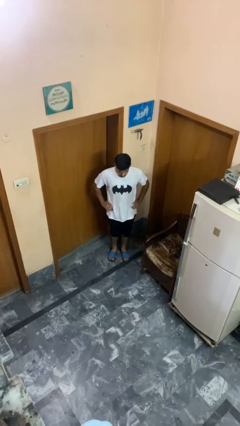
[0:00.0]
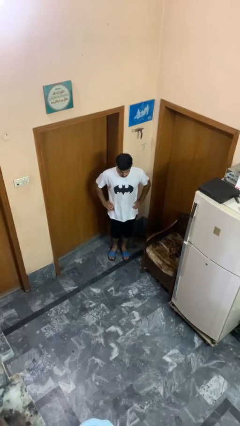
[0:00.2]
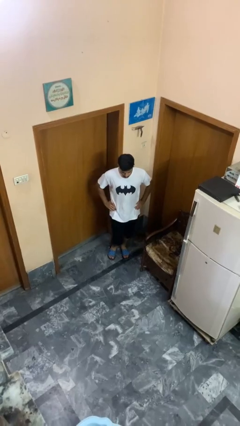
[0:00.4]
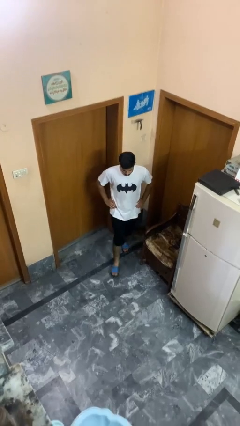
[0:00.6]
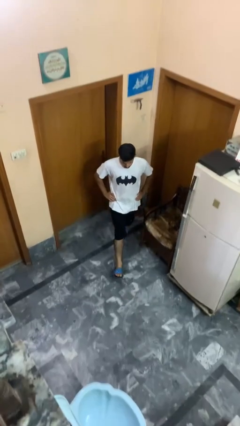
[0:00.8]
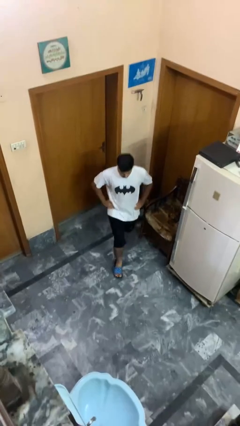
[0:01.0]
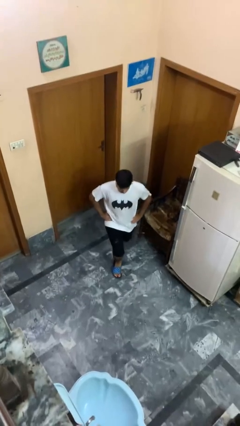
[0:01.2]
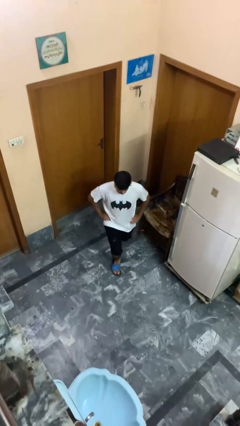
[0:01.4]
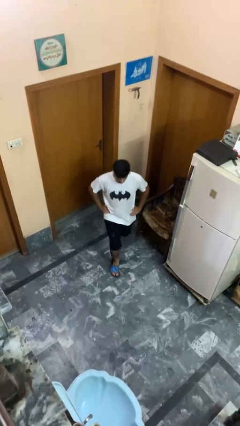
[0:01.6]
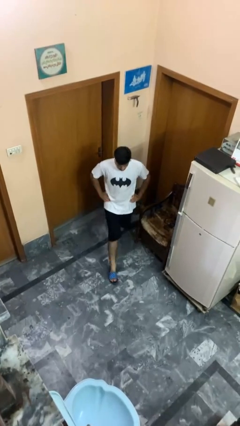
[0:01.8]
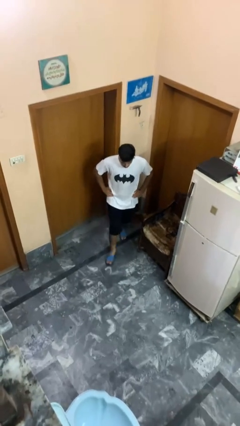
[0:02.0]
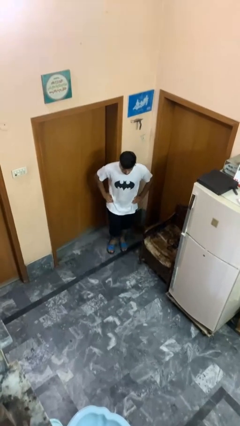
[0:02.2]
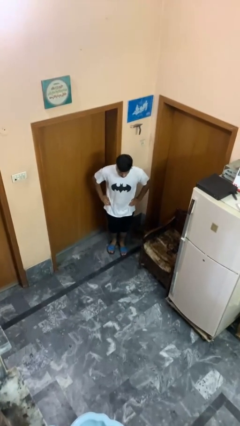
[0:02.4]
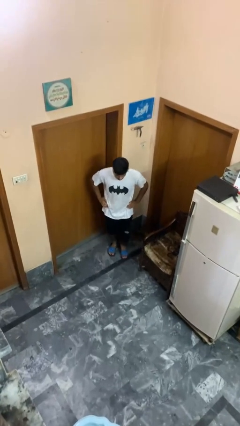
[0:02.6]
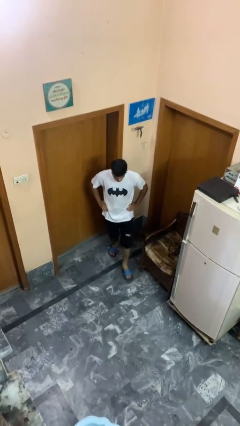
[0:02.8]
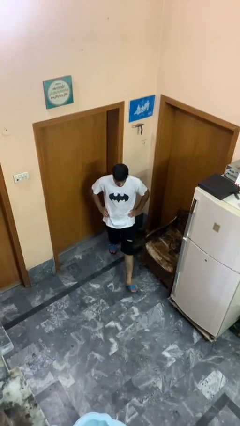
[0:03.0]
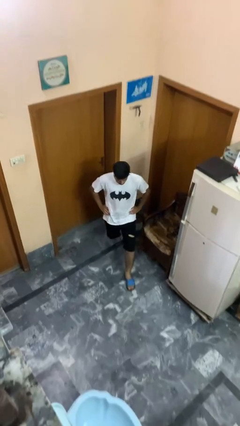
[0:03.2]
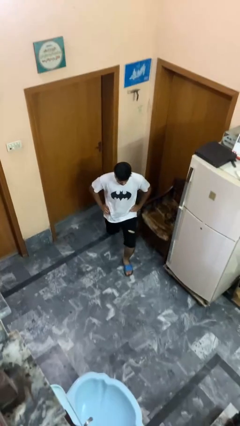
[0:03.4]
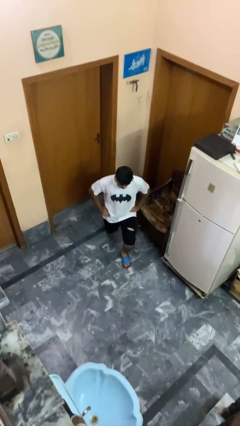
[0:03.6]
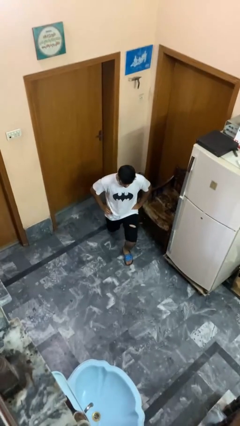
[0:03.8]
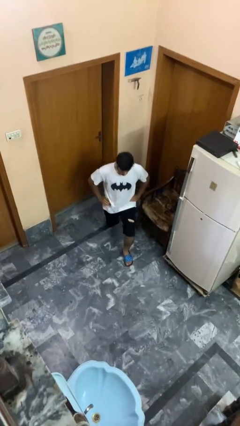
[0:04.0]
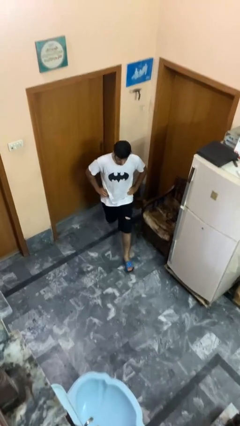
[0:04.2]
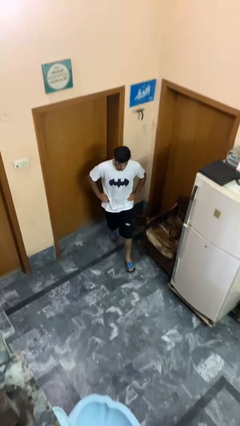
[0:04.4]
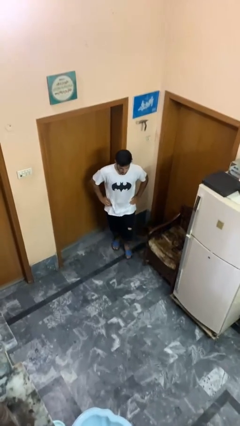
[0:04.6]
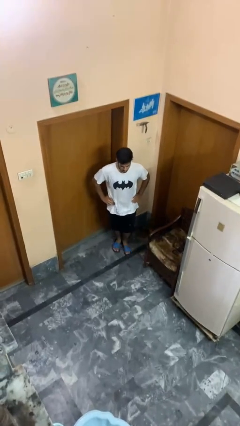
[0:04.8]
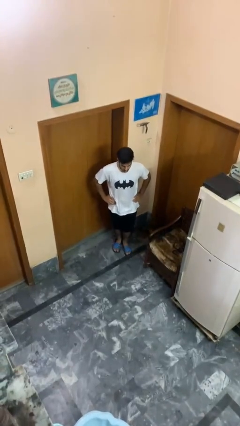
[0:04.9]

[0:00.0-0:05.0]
person exercises with lunges

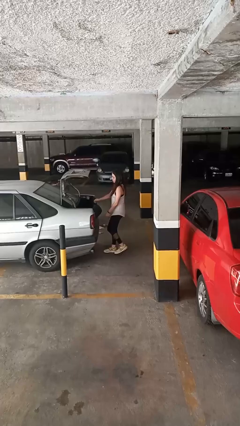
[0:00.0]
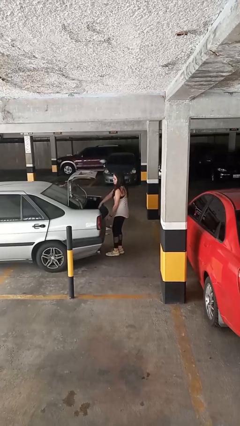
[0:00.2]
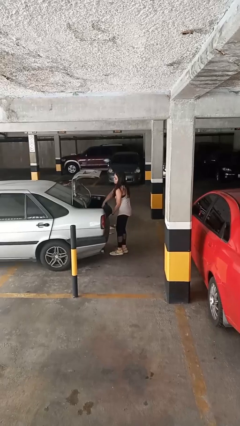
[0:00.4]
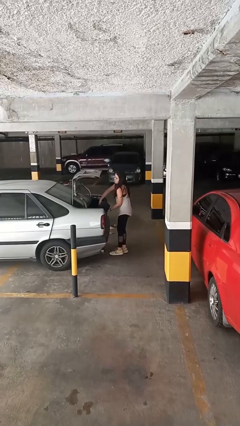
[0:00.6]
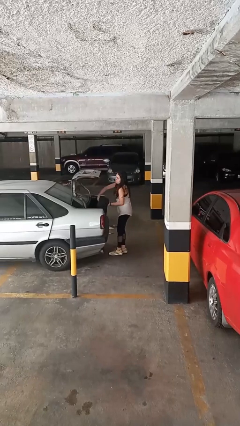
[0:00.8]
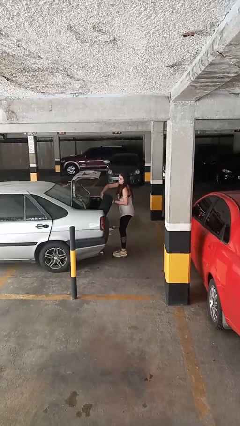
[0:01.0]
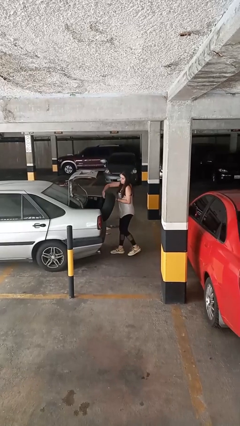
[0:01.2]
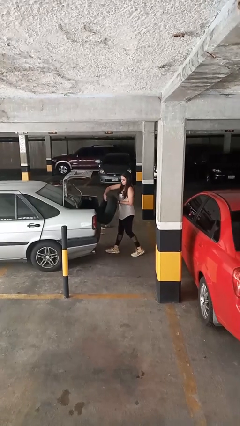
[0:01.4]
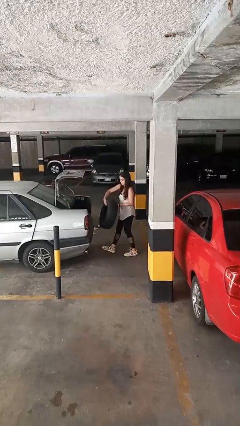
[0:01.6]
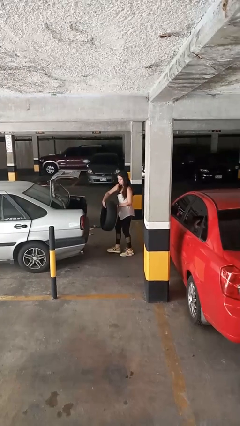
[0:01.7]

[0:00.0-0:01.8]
person unloads car

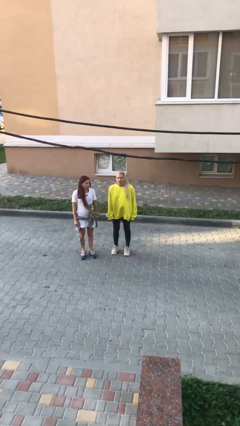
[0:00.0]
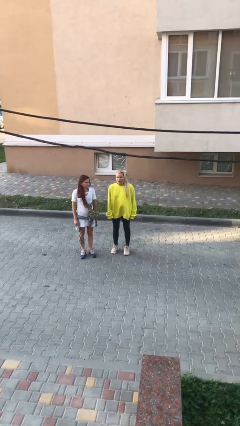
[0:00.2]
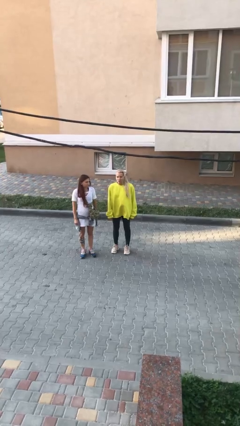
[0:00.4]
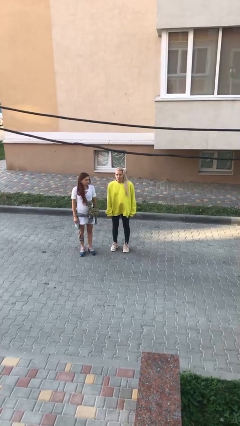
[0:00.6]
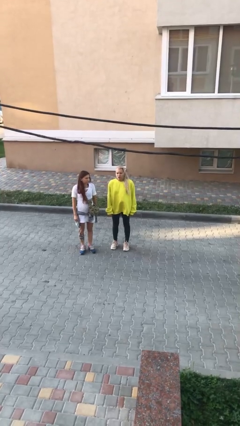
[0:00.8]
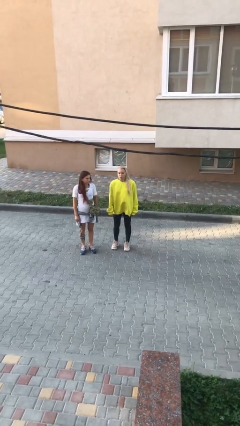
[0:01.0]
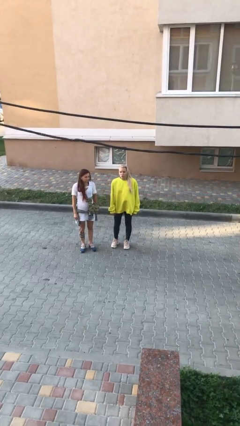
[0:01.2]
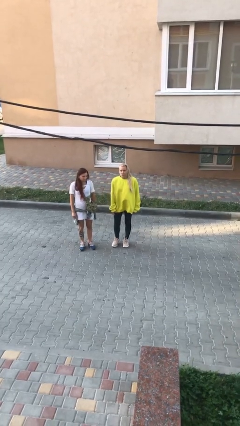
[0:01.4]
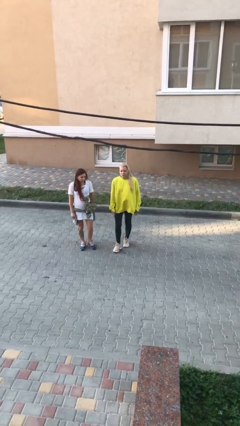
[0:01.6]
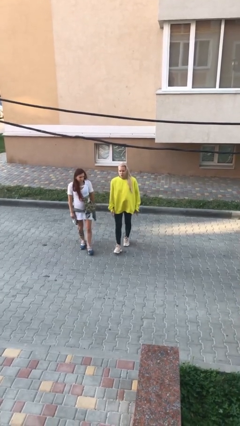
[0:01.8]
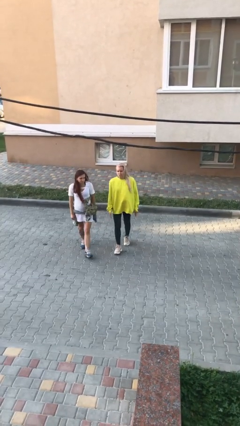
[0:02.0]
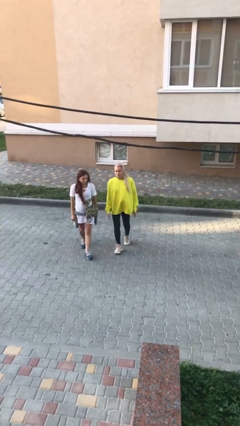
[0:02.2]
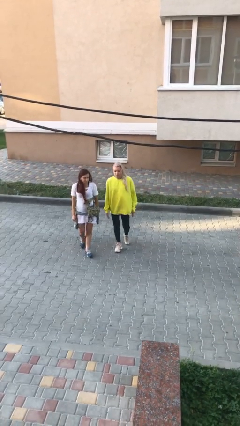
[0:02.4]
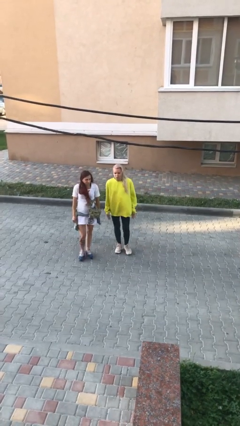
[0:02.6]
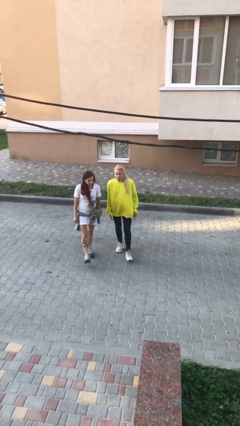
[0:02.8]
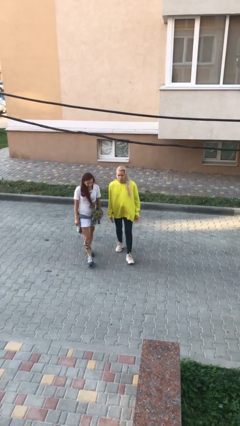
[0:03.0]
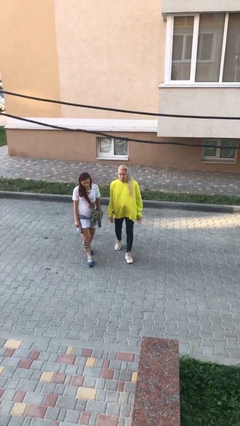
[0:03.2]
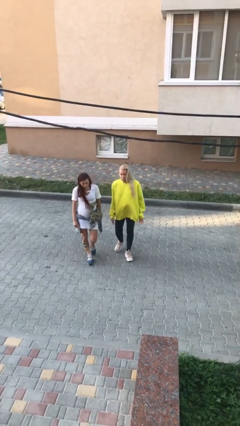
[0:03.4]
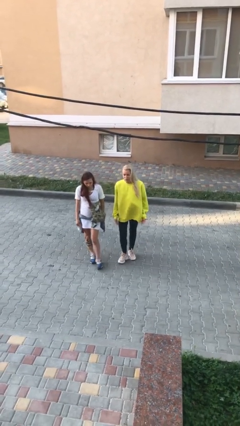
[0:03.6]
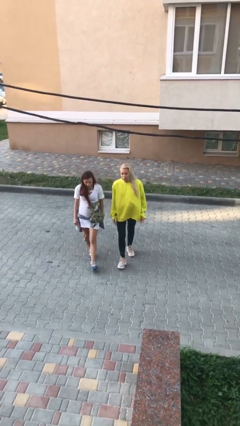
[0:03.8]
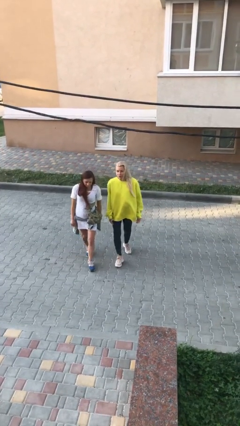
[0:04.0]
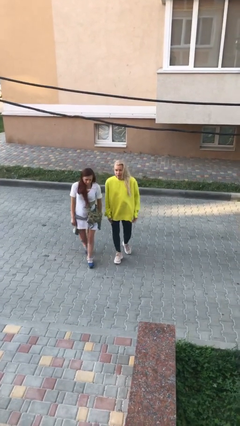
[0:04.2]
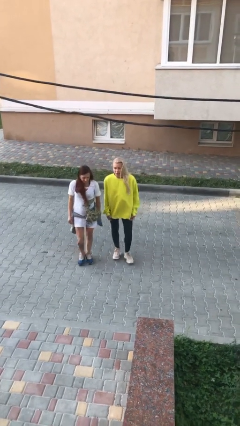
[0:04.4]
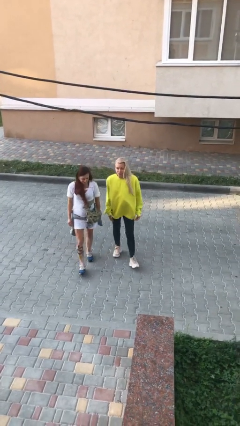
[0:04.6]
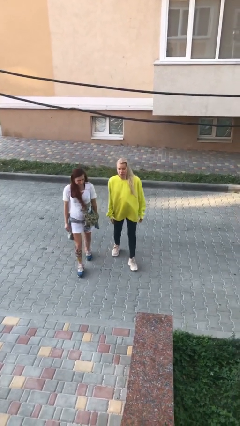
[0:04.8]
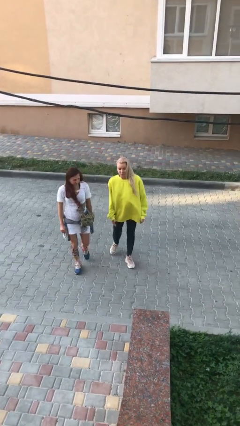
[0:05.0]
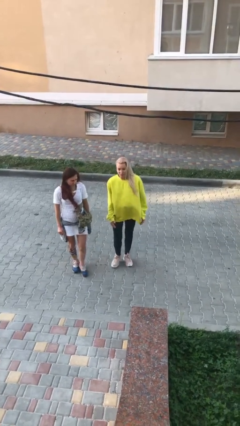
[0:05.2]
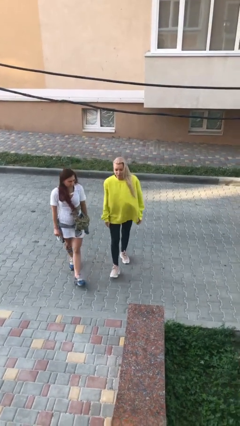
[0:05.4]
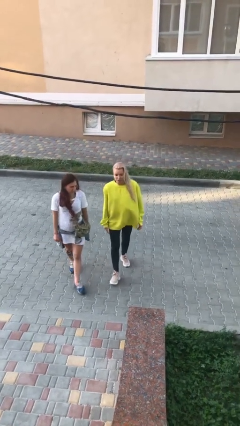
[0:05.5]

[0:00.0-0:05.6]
person talks to person

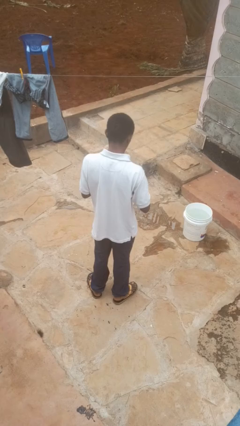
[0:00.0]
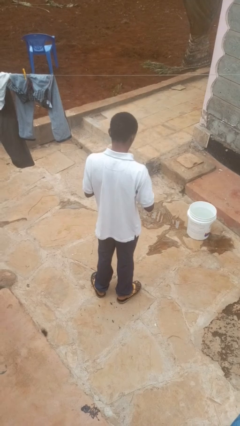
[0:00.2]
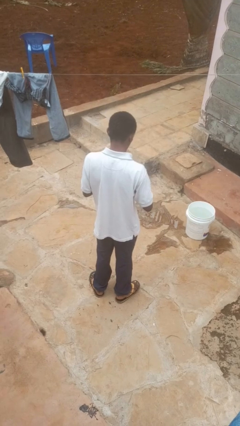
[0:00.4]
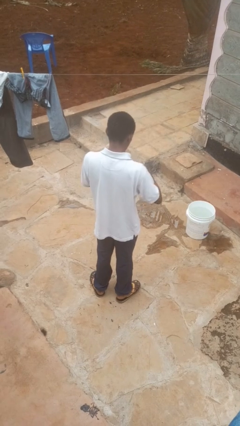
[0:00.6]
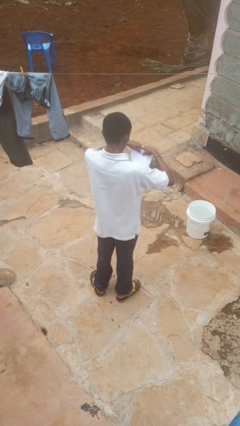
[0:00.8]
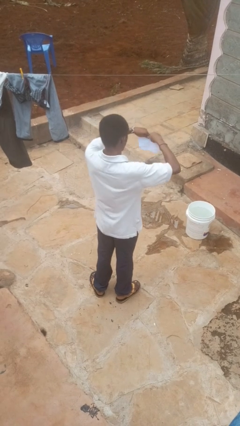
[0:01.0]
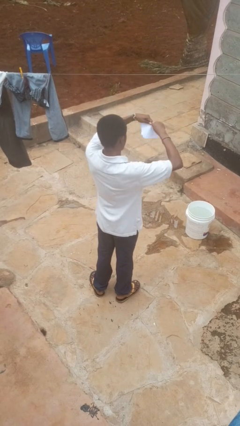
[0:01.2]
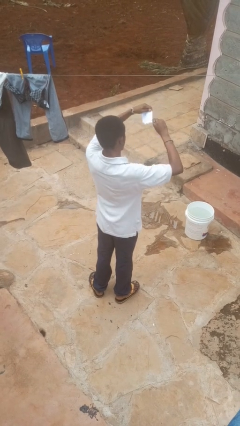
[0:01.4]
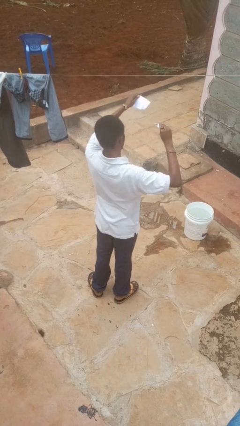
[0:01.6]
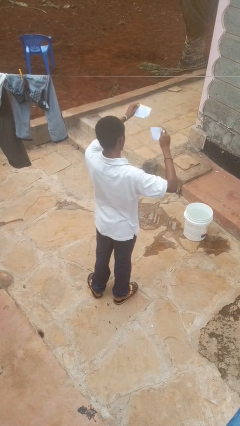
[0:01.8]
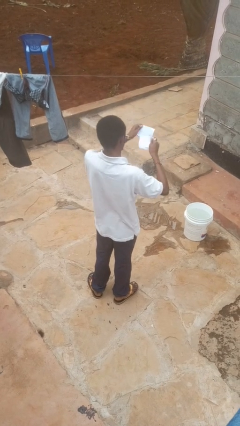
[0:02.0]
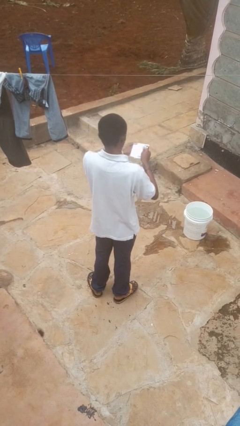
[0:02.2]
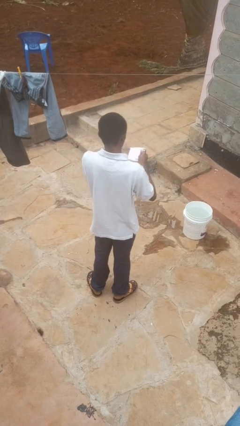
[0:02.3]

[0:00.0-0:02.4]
person tears paper

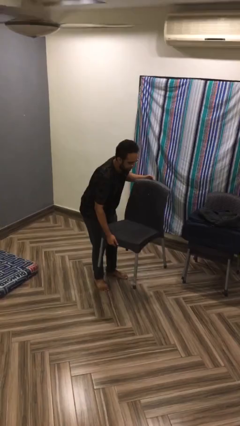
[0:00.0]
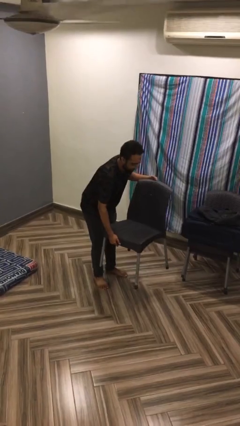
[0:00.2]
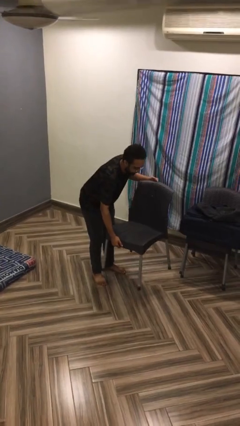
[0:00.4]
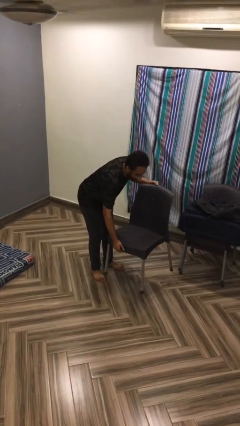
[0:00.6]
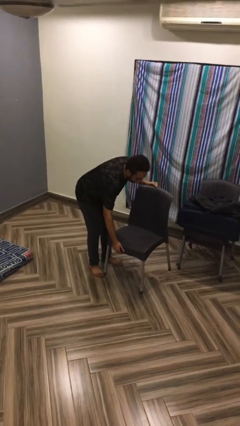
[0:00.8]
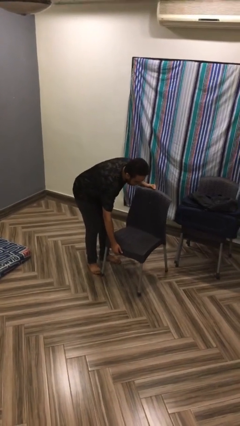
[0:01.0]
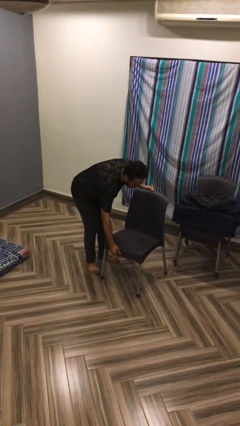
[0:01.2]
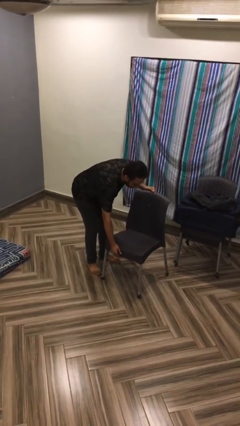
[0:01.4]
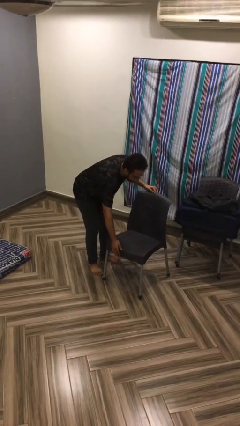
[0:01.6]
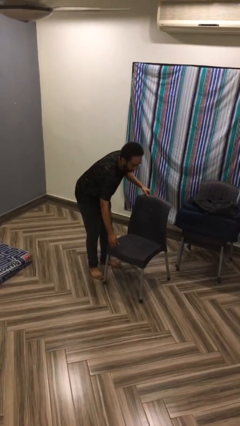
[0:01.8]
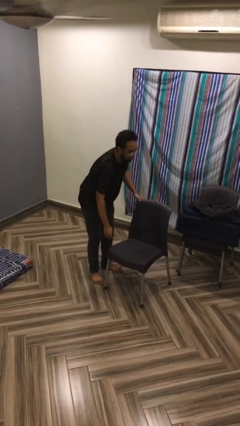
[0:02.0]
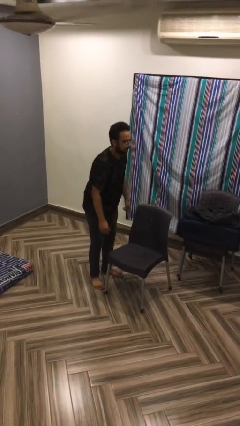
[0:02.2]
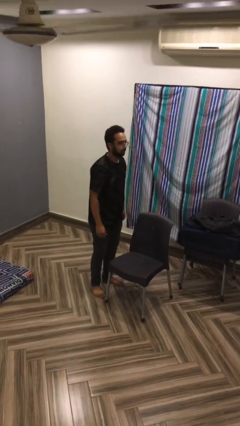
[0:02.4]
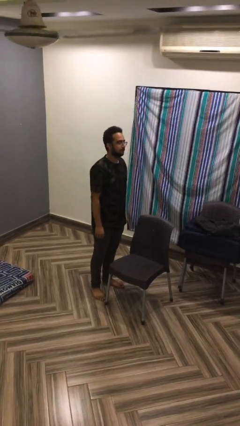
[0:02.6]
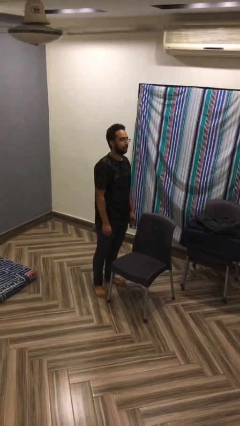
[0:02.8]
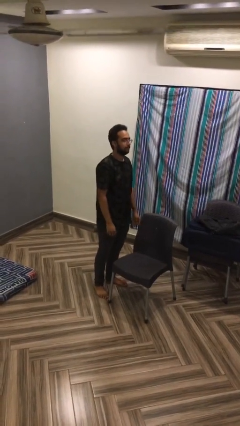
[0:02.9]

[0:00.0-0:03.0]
person puts down object on floor
